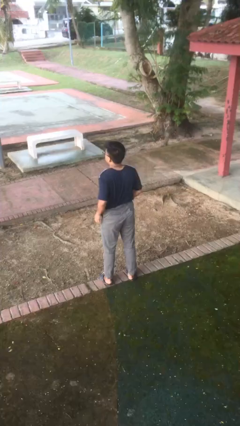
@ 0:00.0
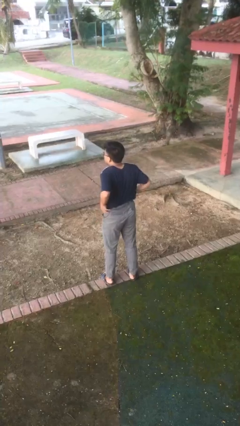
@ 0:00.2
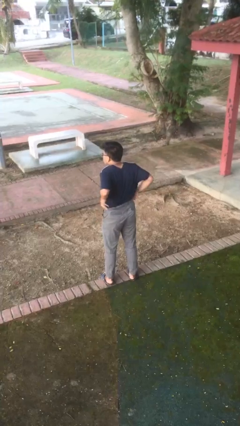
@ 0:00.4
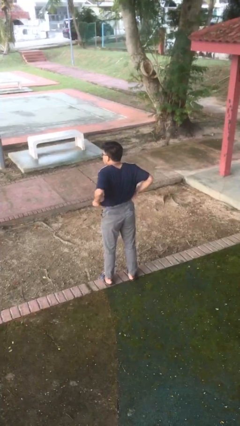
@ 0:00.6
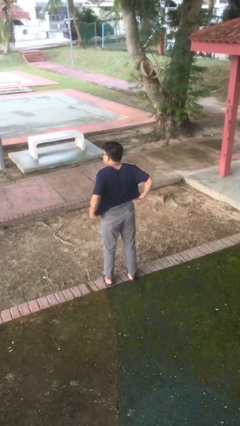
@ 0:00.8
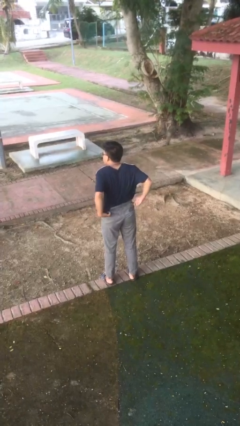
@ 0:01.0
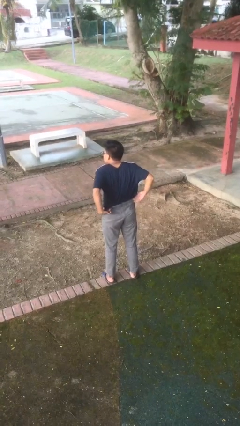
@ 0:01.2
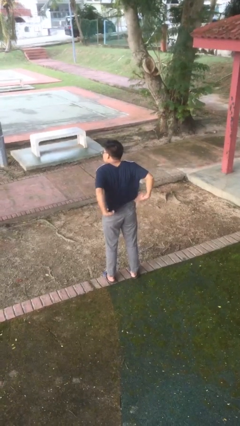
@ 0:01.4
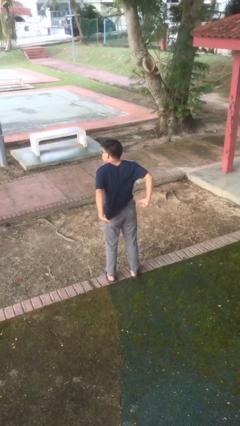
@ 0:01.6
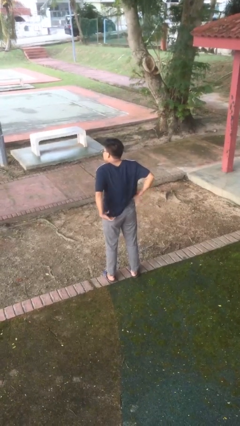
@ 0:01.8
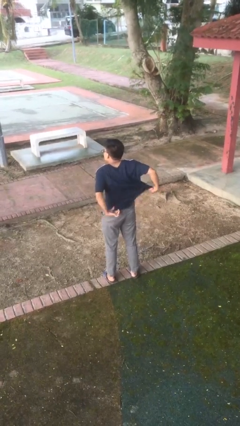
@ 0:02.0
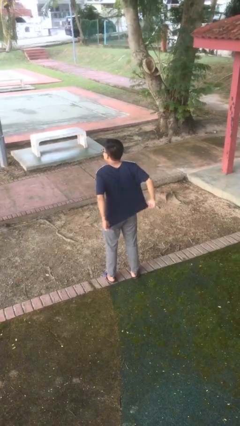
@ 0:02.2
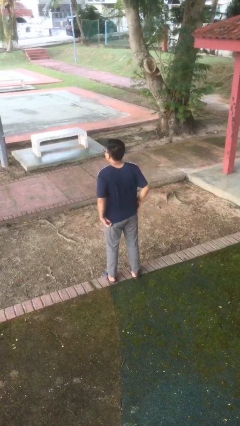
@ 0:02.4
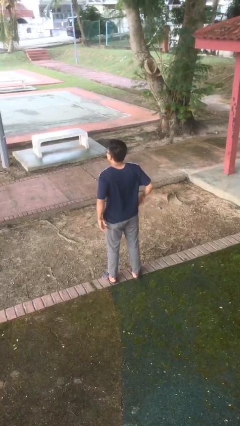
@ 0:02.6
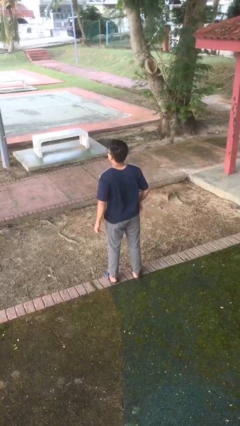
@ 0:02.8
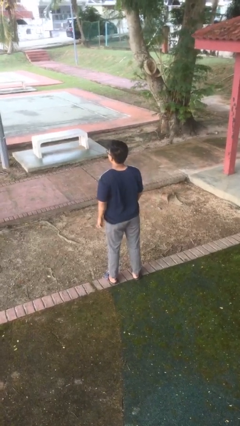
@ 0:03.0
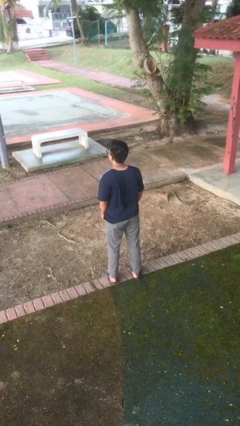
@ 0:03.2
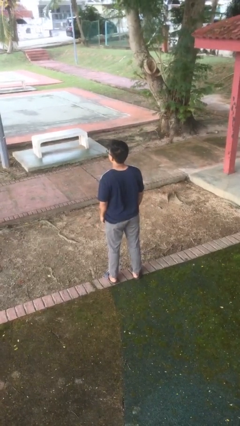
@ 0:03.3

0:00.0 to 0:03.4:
person untucks shirt

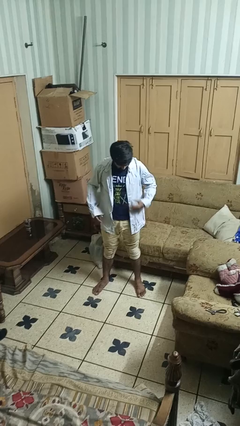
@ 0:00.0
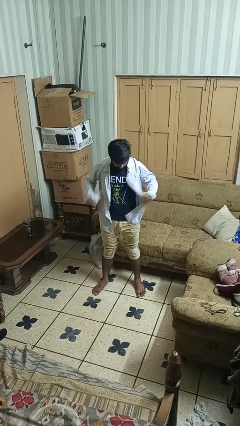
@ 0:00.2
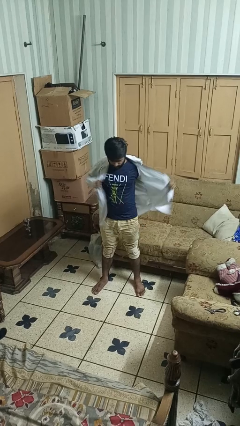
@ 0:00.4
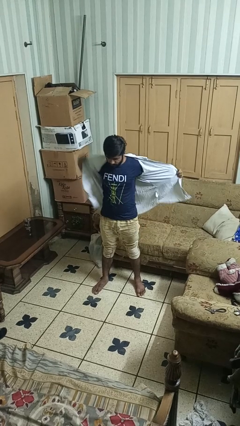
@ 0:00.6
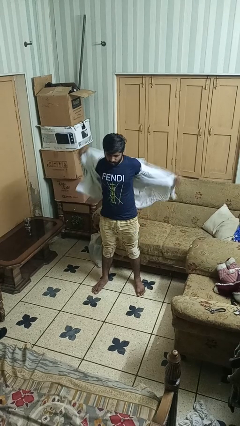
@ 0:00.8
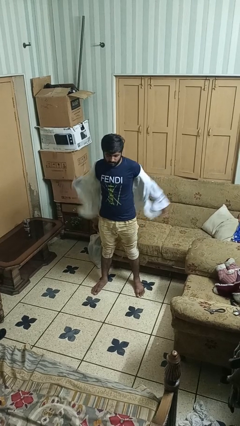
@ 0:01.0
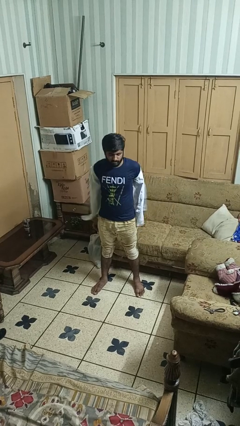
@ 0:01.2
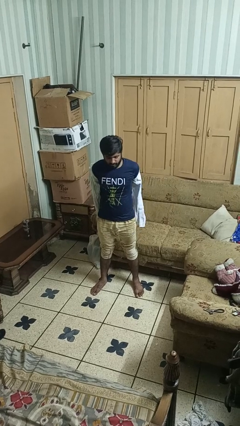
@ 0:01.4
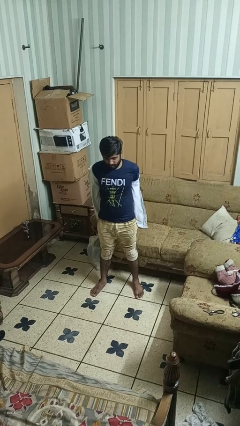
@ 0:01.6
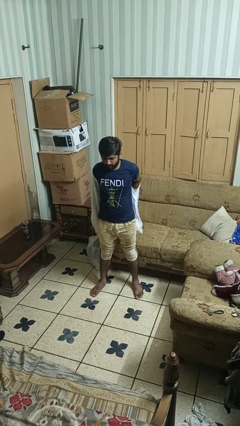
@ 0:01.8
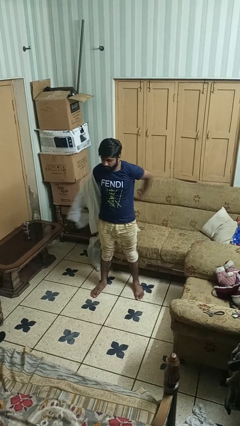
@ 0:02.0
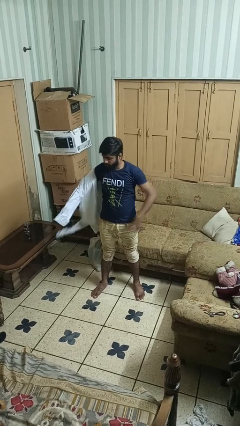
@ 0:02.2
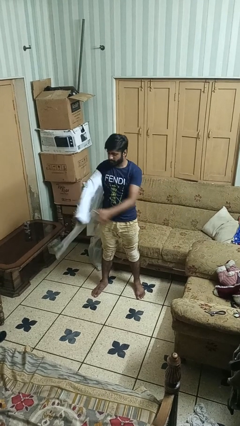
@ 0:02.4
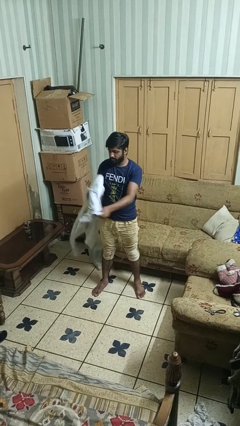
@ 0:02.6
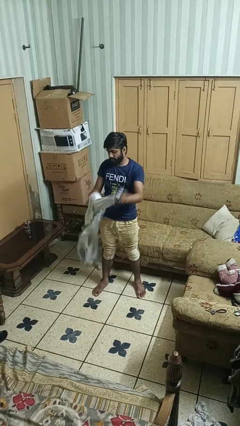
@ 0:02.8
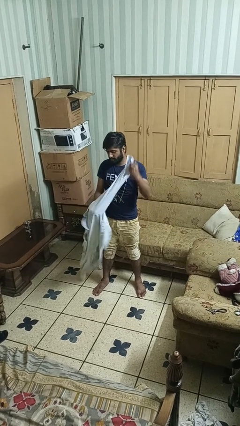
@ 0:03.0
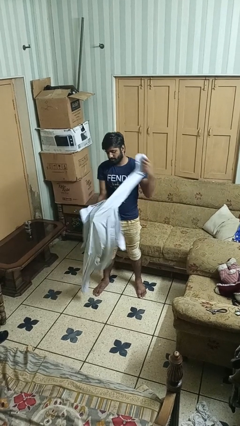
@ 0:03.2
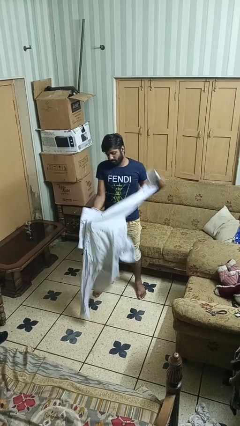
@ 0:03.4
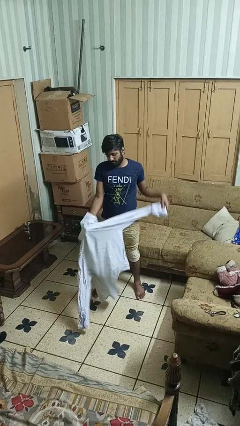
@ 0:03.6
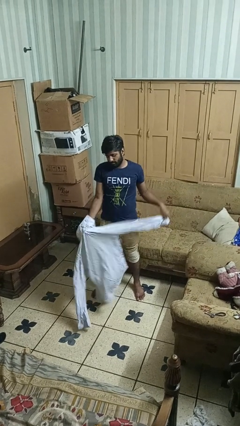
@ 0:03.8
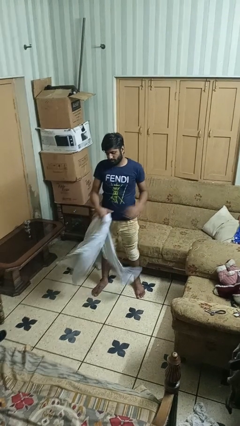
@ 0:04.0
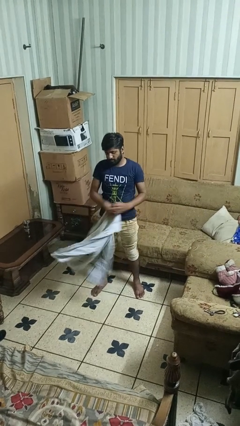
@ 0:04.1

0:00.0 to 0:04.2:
person takes off shirt

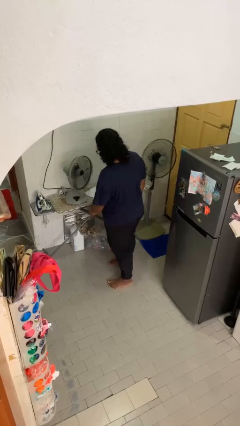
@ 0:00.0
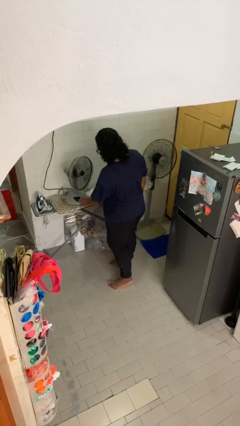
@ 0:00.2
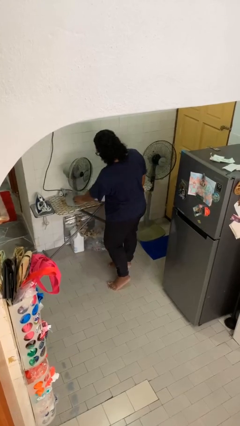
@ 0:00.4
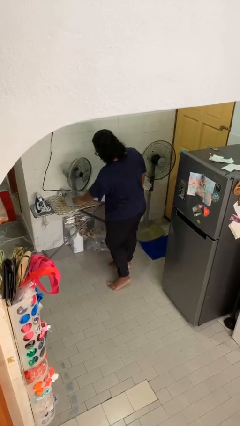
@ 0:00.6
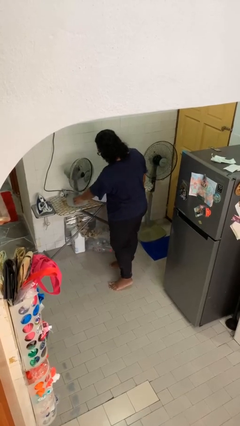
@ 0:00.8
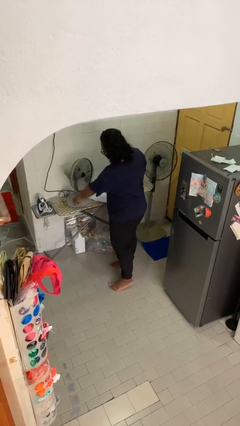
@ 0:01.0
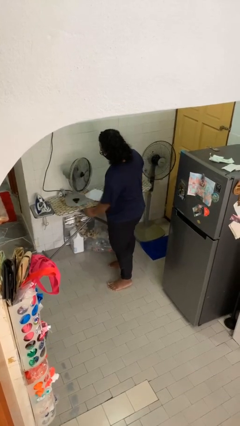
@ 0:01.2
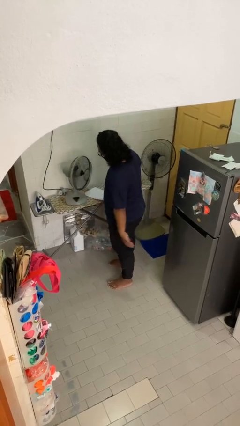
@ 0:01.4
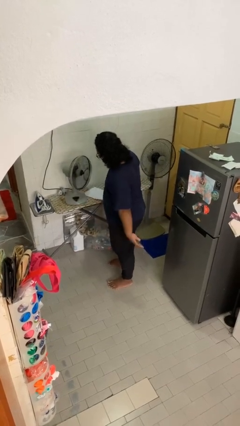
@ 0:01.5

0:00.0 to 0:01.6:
person turns off fan

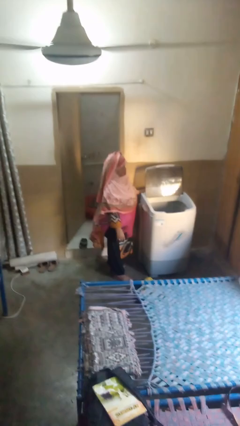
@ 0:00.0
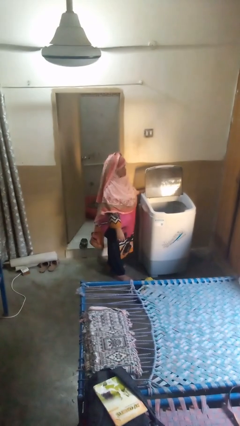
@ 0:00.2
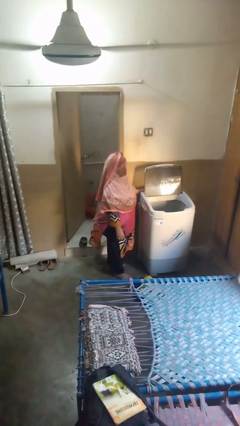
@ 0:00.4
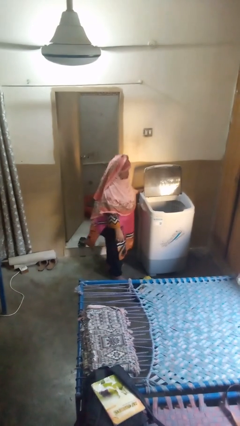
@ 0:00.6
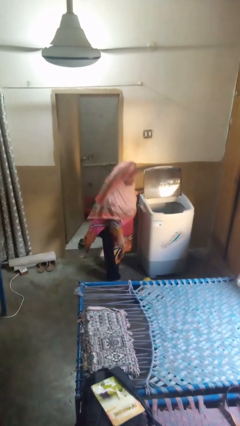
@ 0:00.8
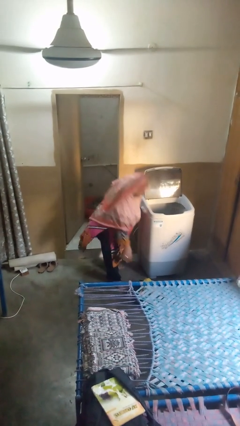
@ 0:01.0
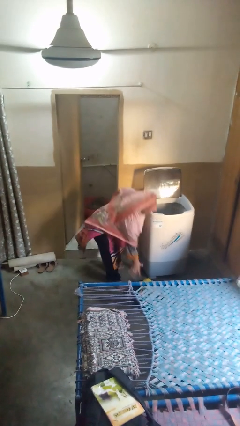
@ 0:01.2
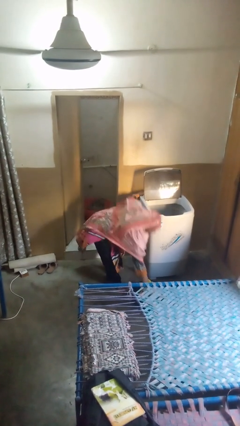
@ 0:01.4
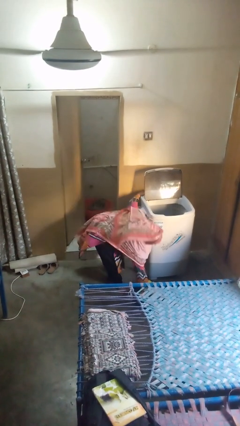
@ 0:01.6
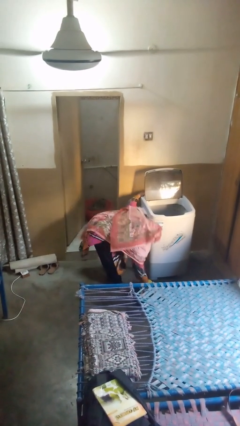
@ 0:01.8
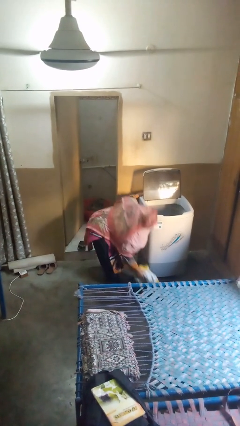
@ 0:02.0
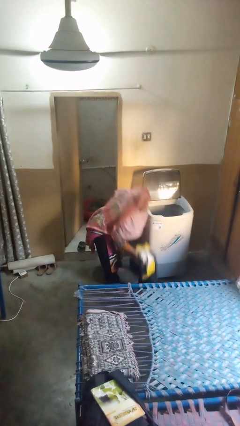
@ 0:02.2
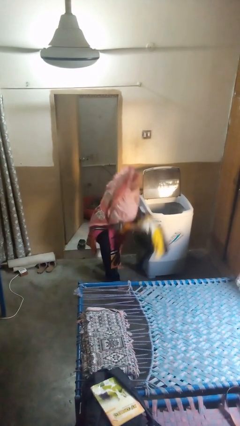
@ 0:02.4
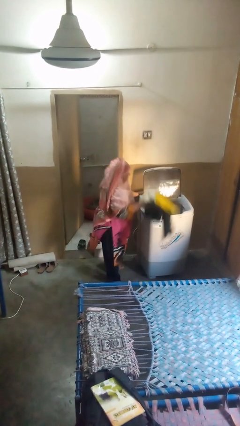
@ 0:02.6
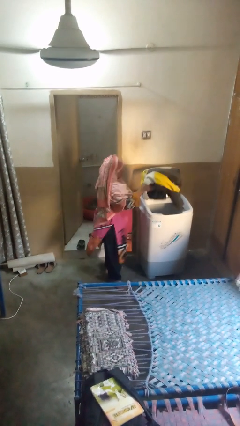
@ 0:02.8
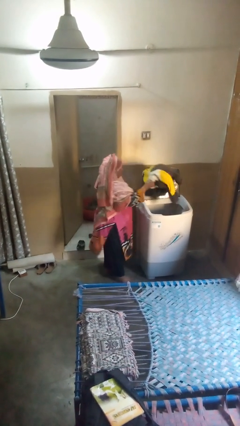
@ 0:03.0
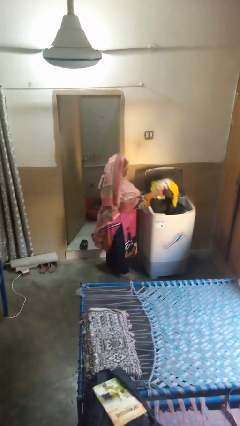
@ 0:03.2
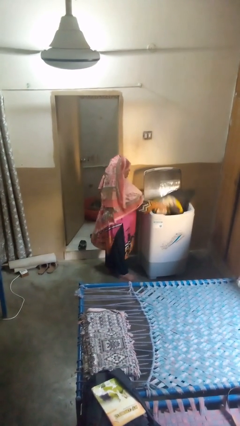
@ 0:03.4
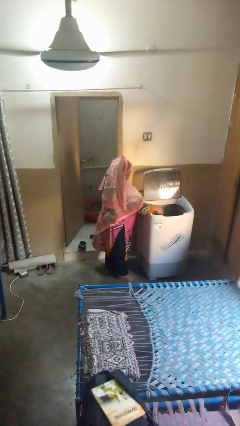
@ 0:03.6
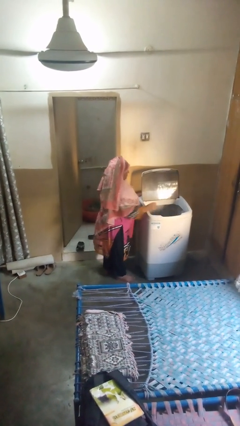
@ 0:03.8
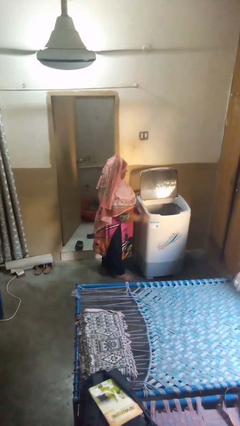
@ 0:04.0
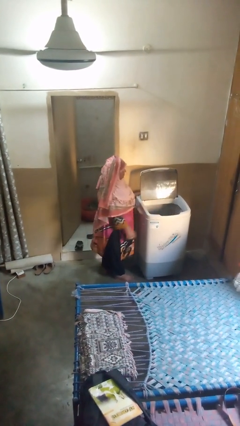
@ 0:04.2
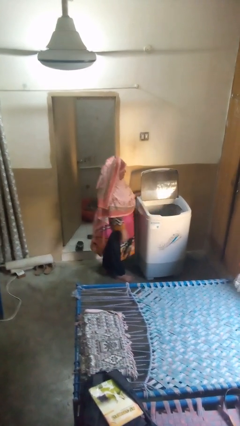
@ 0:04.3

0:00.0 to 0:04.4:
person loads clotheswasher

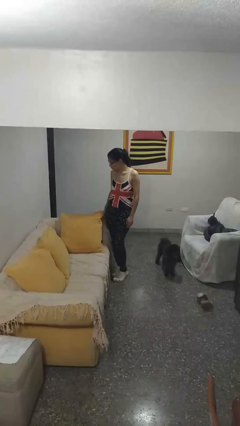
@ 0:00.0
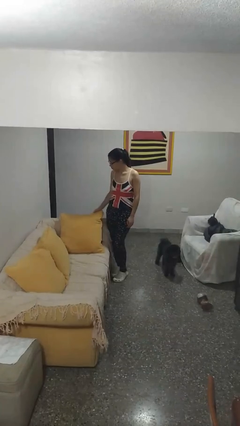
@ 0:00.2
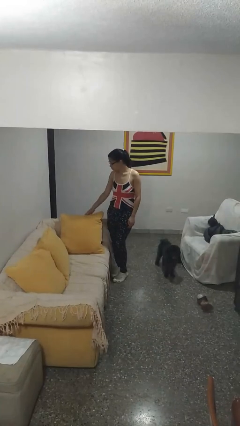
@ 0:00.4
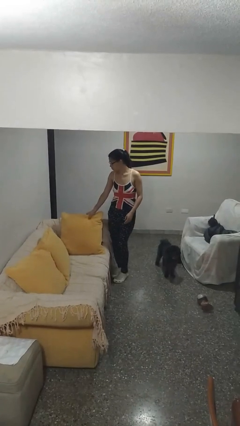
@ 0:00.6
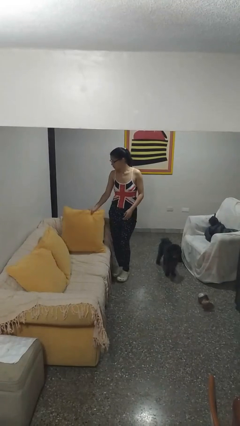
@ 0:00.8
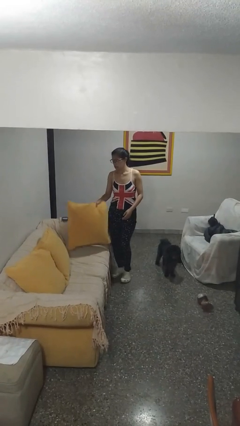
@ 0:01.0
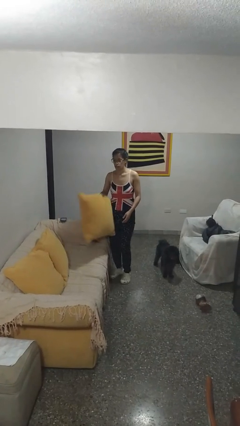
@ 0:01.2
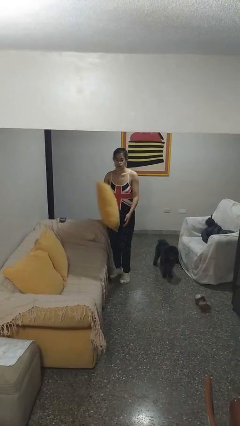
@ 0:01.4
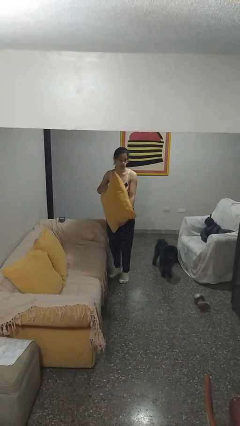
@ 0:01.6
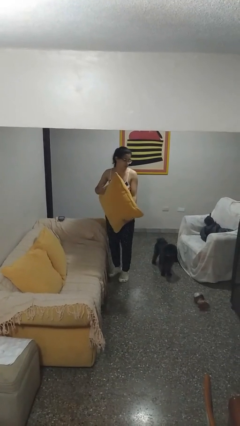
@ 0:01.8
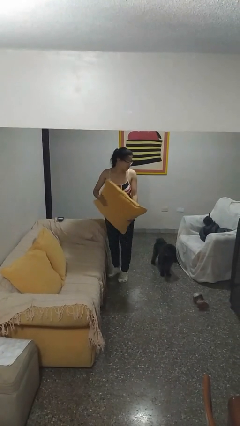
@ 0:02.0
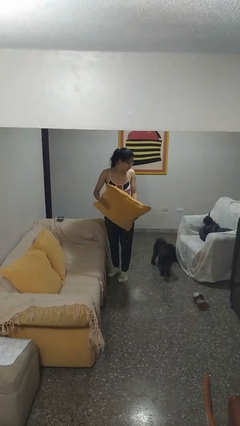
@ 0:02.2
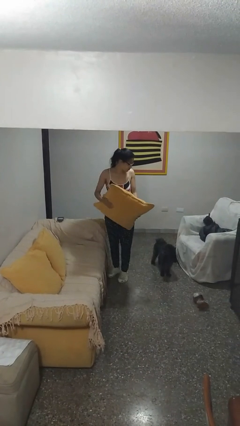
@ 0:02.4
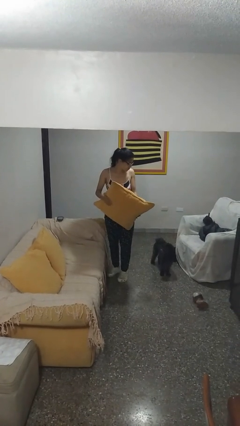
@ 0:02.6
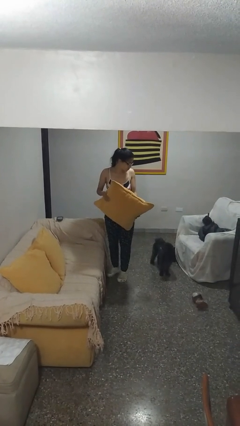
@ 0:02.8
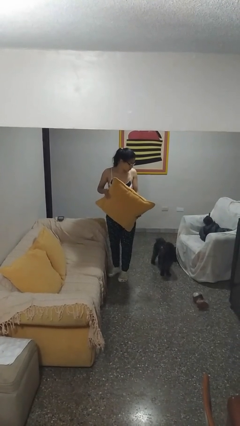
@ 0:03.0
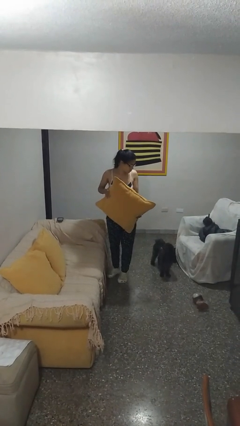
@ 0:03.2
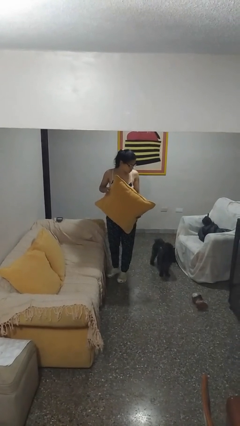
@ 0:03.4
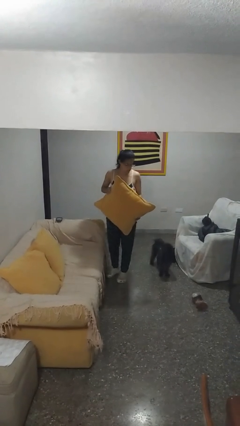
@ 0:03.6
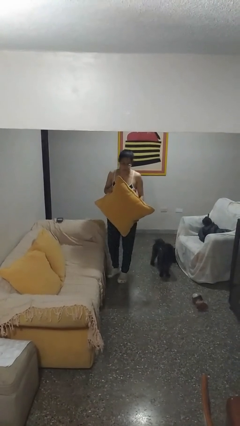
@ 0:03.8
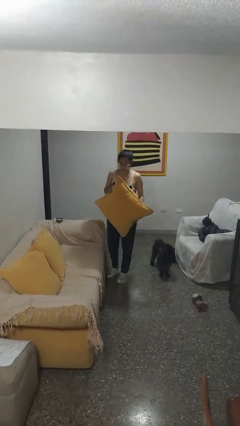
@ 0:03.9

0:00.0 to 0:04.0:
person picks up object from couch
